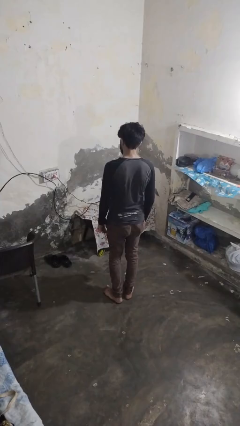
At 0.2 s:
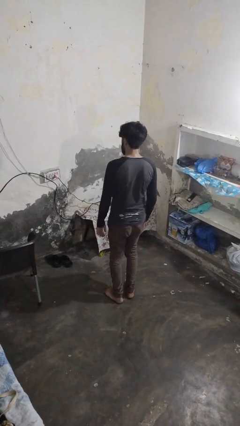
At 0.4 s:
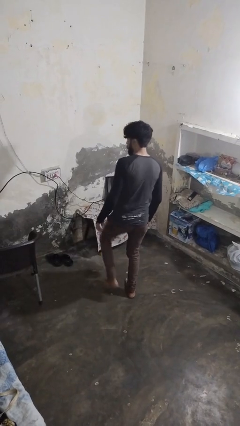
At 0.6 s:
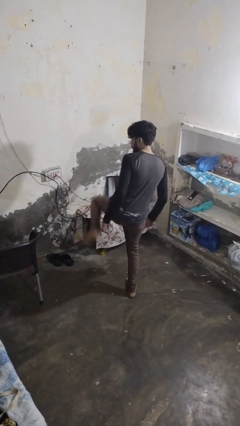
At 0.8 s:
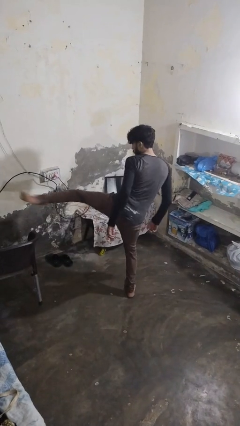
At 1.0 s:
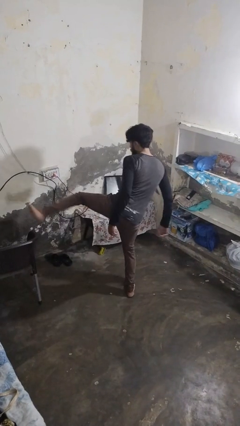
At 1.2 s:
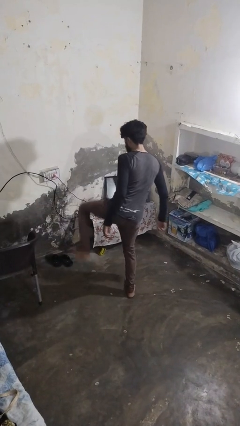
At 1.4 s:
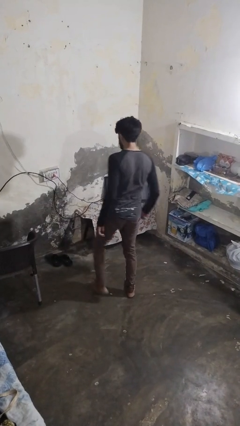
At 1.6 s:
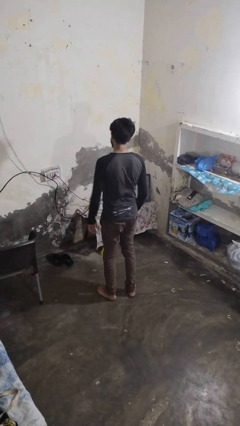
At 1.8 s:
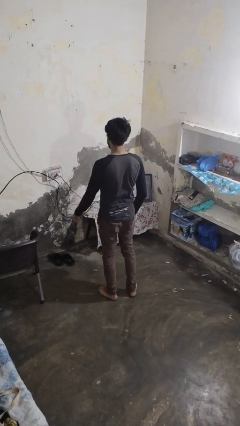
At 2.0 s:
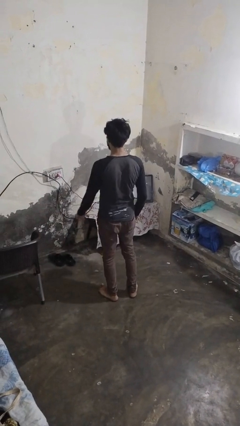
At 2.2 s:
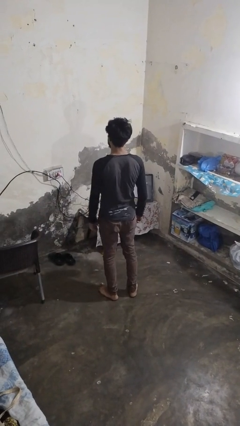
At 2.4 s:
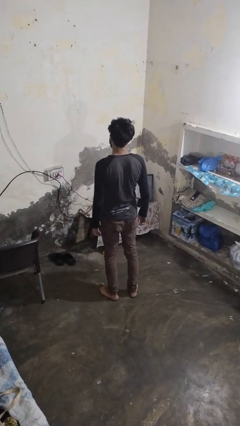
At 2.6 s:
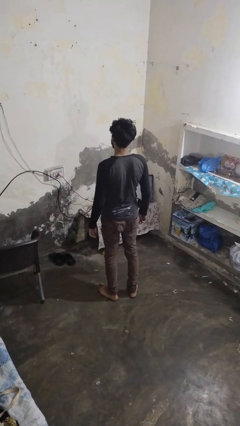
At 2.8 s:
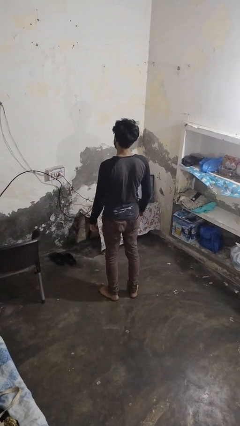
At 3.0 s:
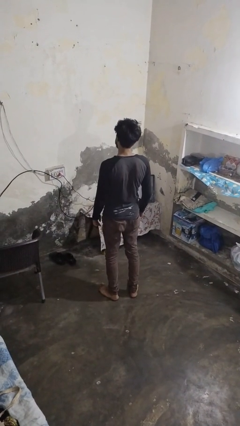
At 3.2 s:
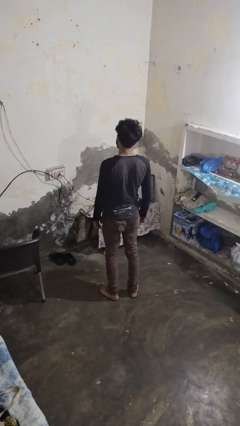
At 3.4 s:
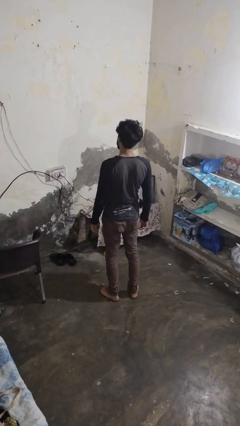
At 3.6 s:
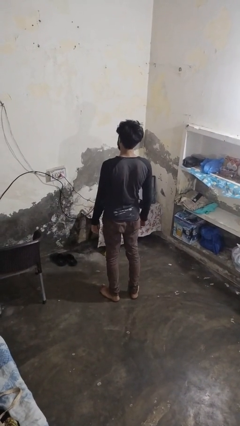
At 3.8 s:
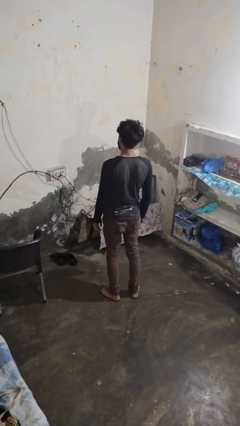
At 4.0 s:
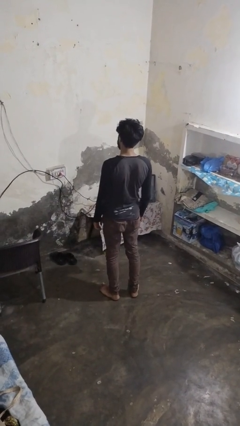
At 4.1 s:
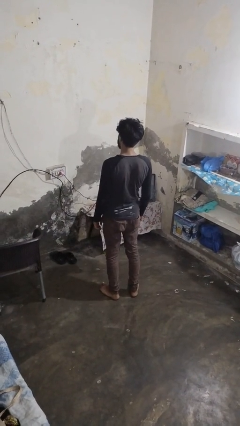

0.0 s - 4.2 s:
person karate kicks

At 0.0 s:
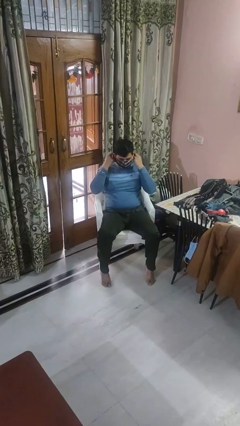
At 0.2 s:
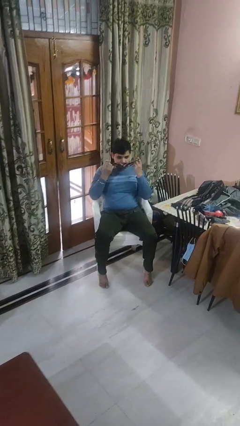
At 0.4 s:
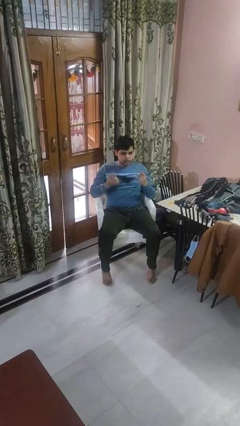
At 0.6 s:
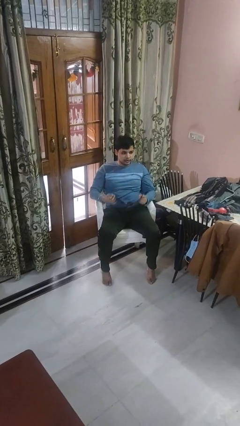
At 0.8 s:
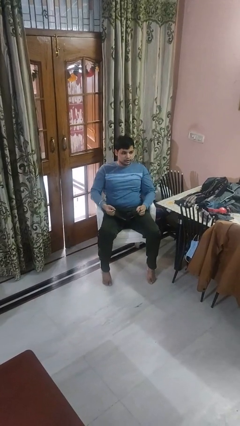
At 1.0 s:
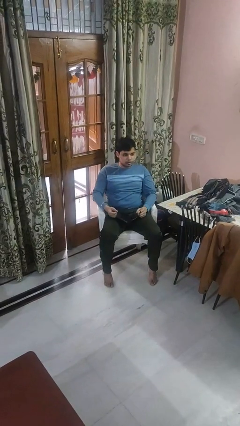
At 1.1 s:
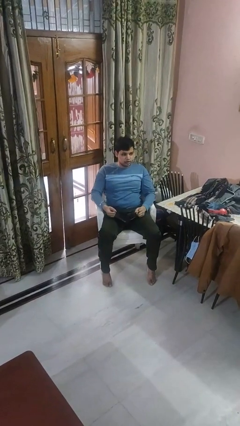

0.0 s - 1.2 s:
person takes off facemask

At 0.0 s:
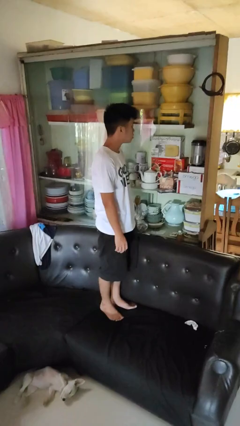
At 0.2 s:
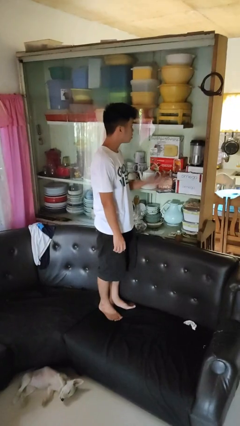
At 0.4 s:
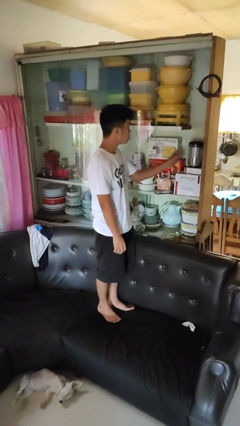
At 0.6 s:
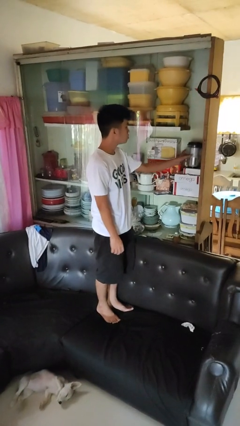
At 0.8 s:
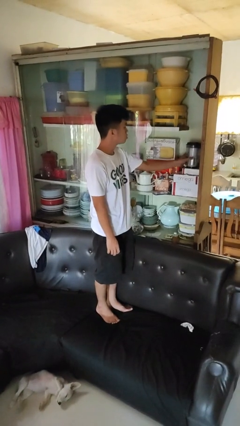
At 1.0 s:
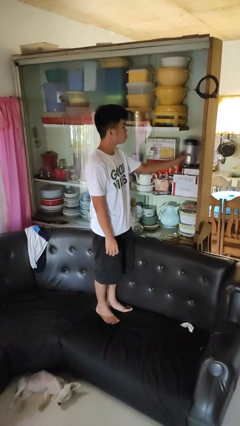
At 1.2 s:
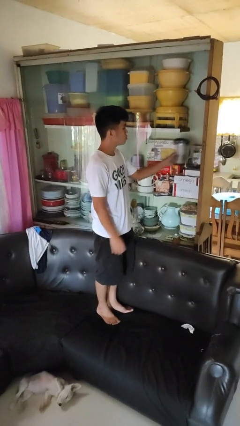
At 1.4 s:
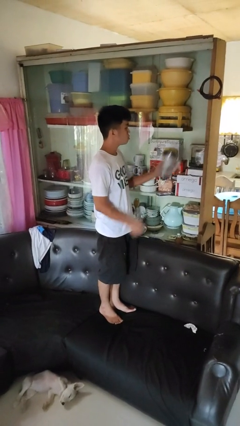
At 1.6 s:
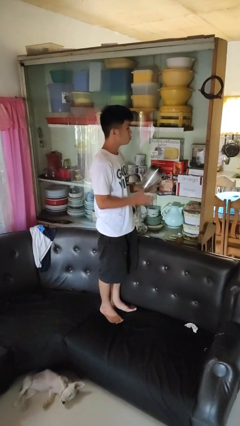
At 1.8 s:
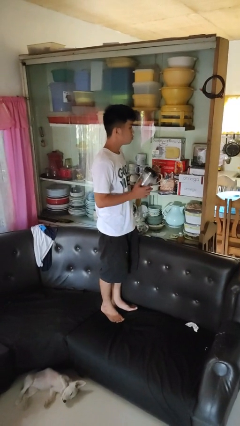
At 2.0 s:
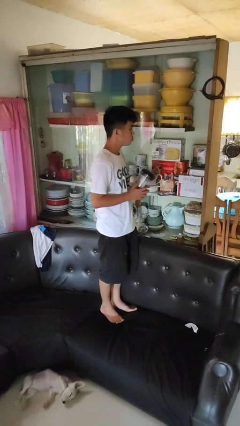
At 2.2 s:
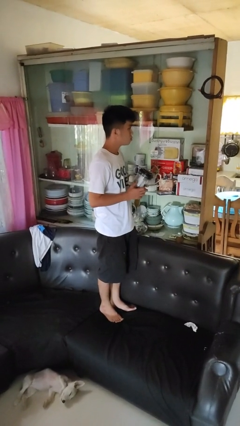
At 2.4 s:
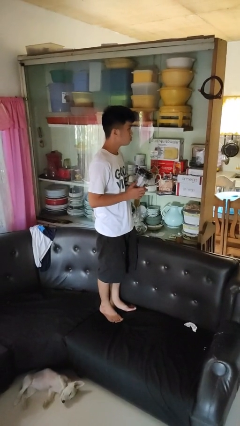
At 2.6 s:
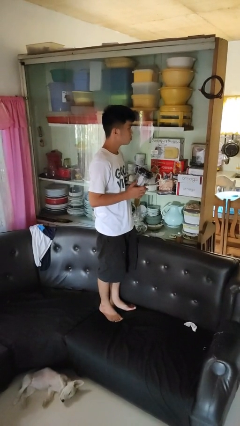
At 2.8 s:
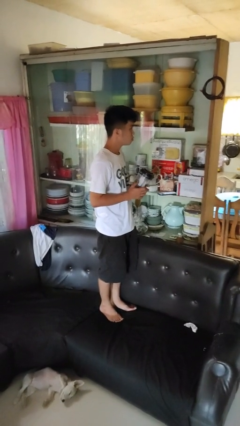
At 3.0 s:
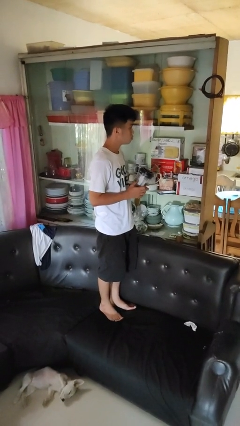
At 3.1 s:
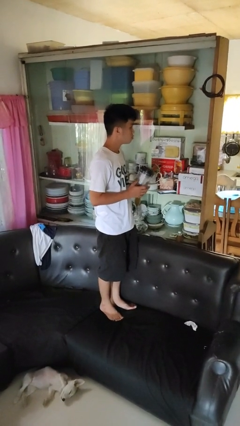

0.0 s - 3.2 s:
person picks up object from cabinet

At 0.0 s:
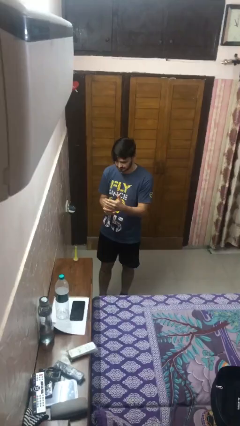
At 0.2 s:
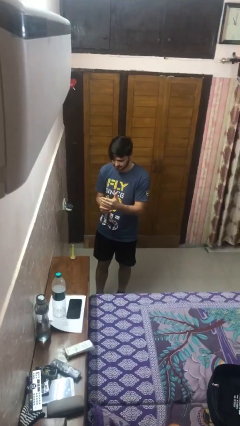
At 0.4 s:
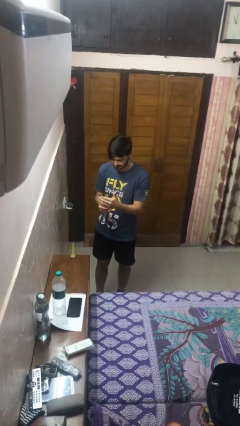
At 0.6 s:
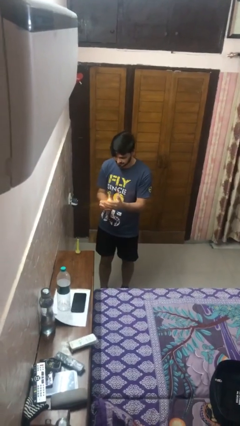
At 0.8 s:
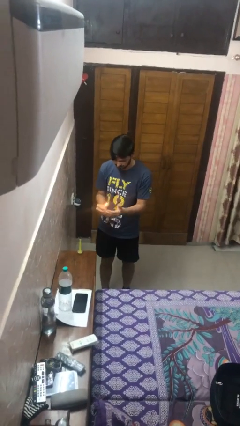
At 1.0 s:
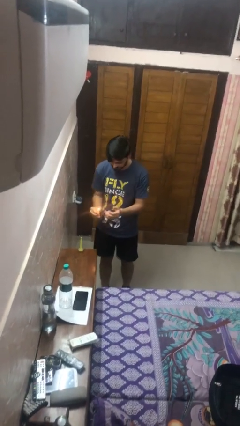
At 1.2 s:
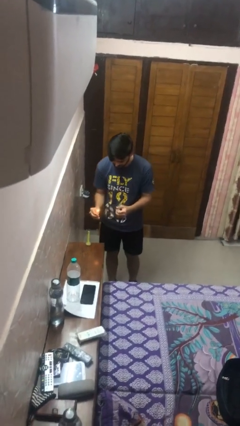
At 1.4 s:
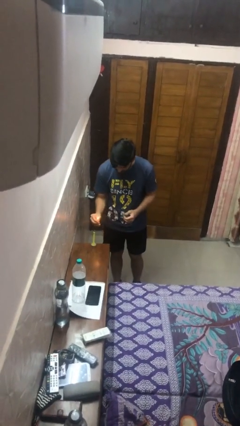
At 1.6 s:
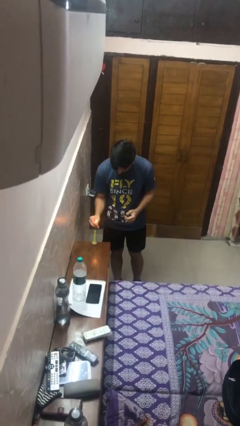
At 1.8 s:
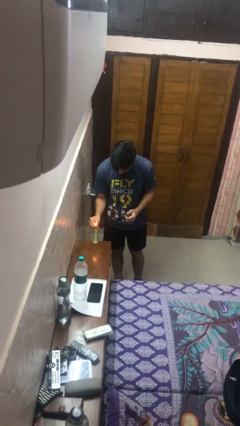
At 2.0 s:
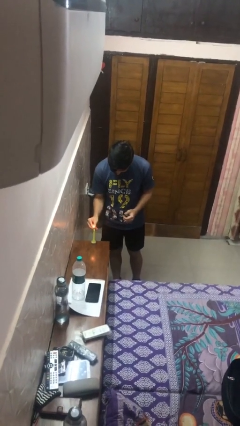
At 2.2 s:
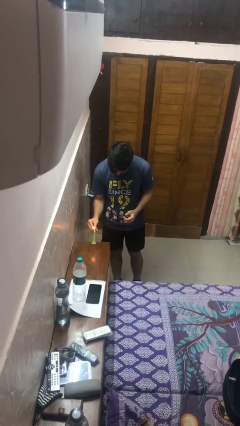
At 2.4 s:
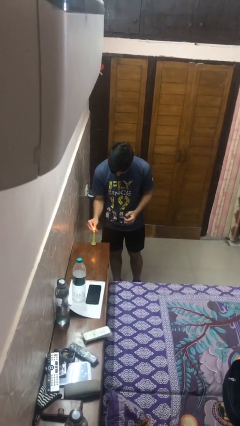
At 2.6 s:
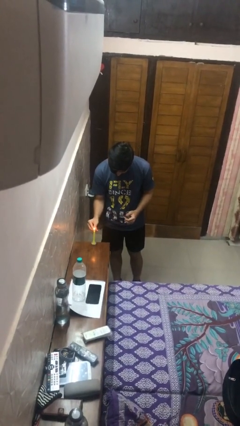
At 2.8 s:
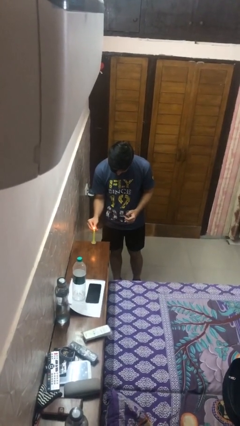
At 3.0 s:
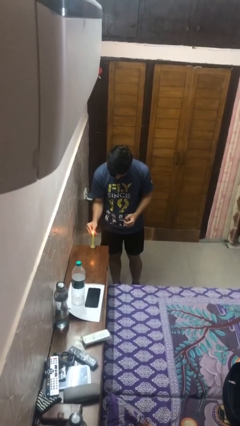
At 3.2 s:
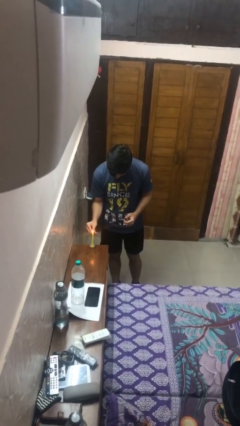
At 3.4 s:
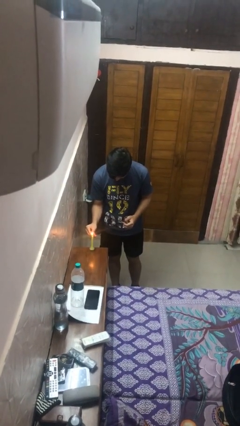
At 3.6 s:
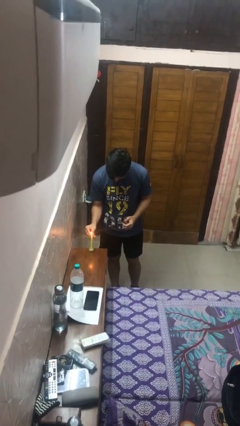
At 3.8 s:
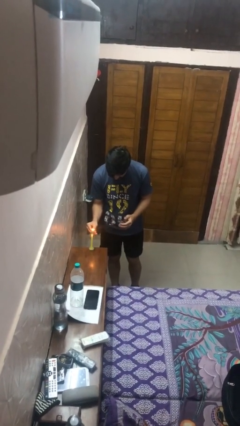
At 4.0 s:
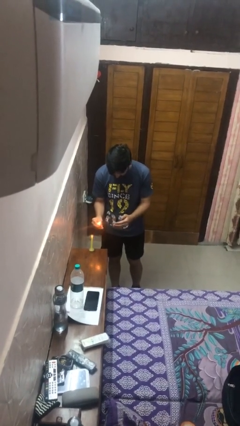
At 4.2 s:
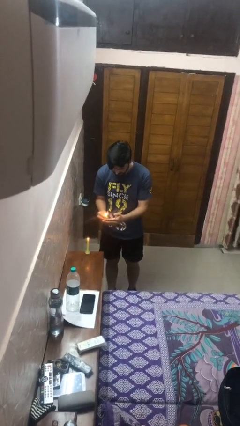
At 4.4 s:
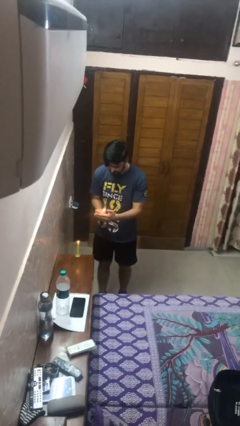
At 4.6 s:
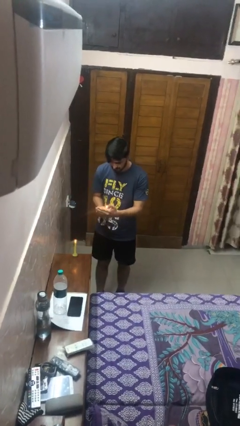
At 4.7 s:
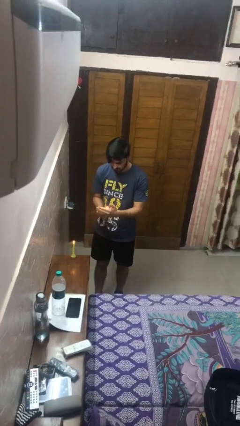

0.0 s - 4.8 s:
person lights candle

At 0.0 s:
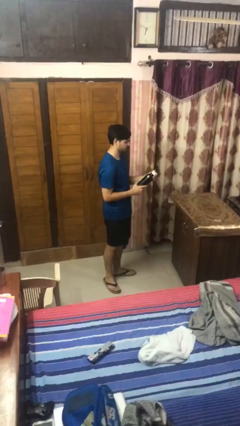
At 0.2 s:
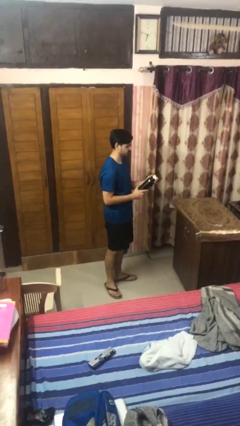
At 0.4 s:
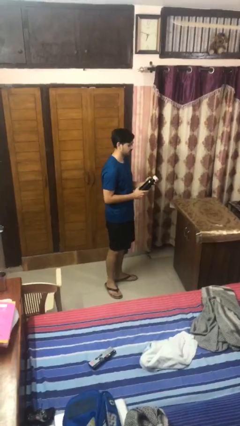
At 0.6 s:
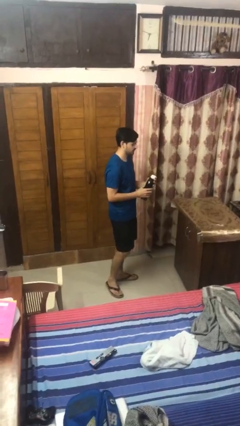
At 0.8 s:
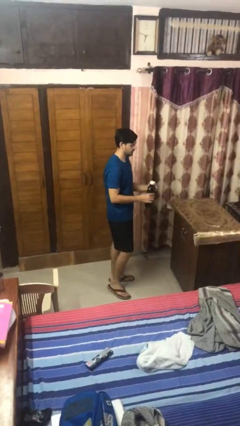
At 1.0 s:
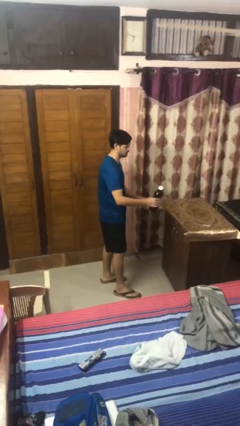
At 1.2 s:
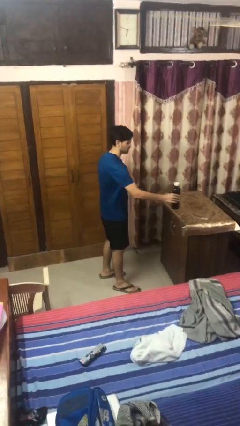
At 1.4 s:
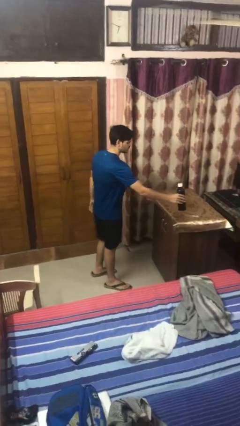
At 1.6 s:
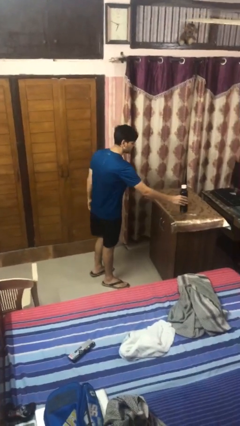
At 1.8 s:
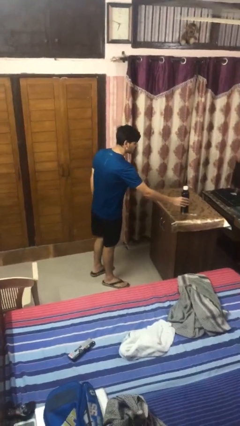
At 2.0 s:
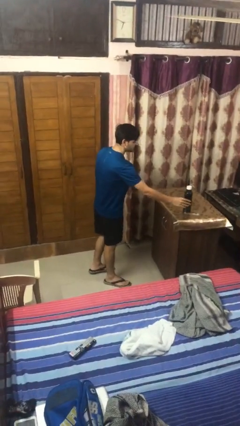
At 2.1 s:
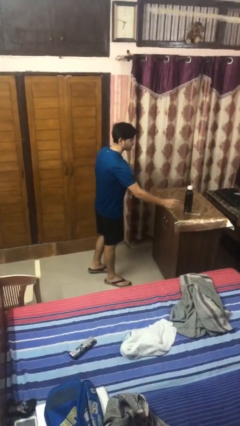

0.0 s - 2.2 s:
person puts down object on countertop

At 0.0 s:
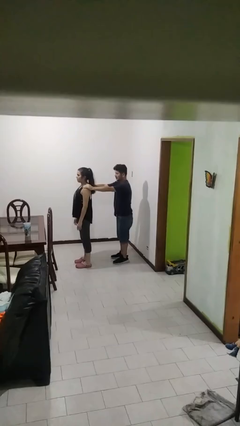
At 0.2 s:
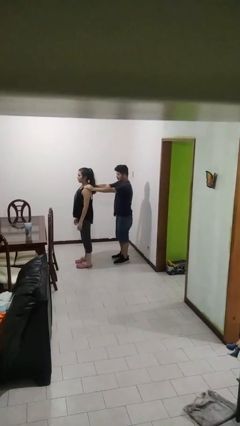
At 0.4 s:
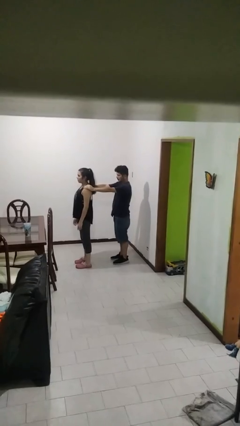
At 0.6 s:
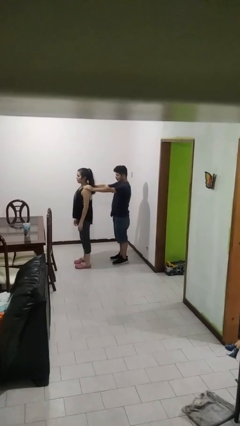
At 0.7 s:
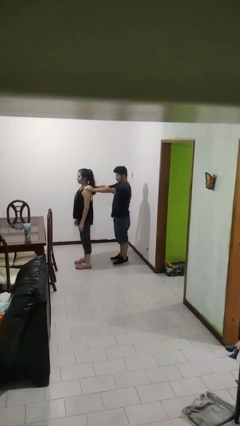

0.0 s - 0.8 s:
person grabs person by shoulder

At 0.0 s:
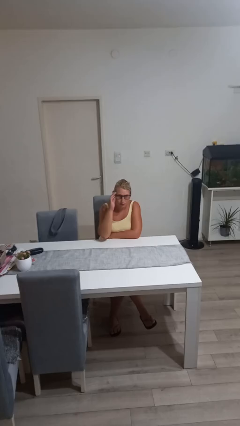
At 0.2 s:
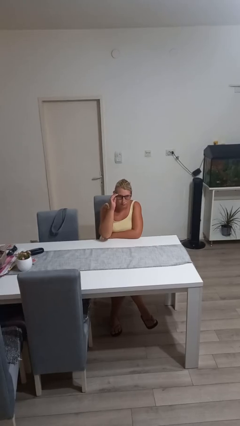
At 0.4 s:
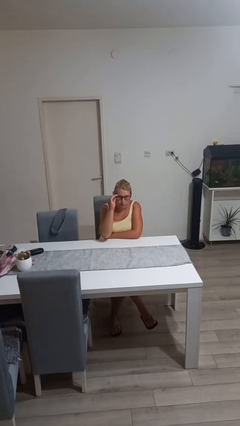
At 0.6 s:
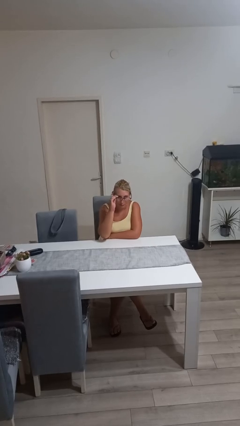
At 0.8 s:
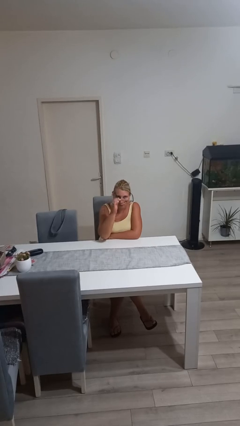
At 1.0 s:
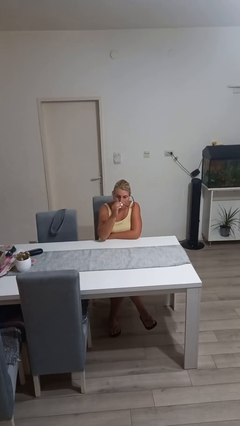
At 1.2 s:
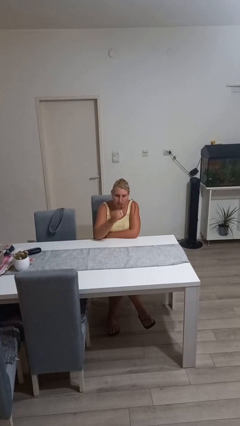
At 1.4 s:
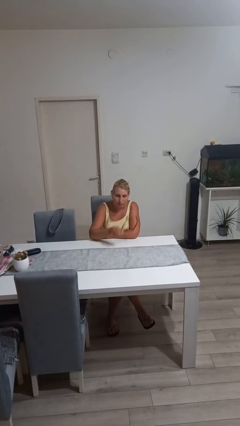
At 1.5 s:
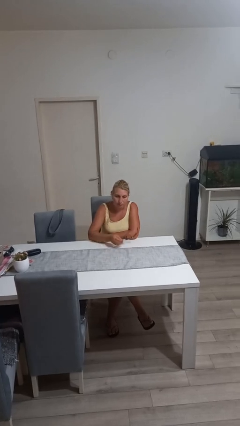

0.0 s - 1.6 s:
person takes off glasses
